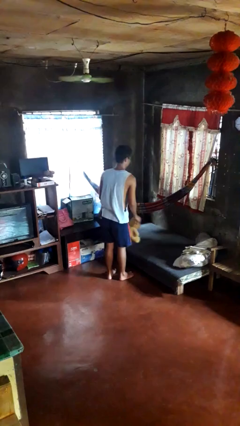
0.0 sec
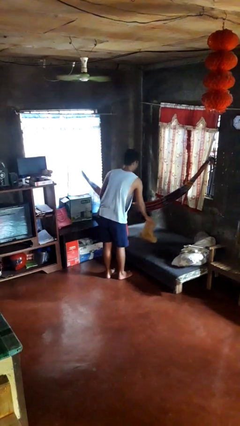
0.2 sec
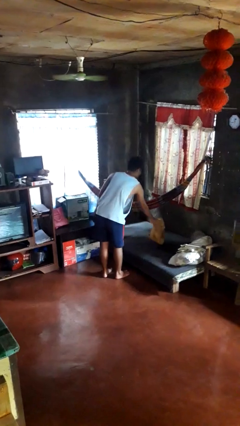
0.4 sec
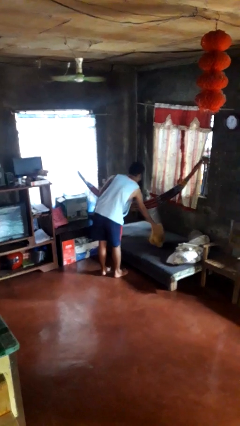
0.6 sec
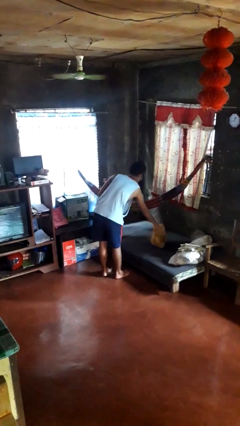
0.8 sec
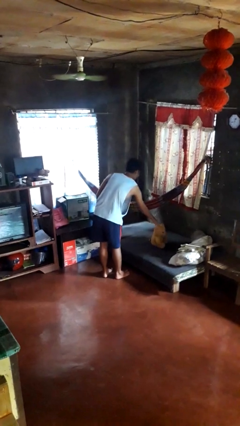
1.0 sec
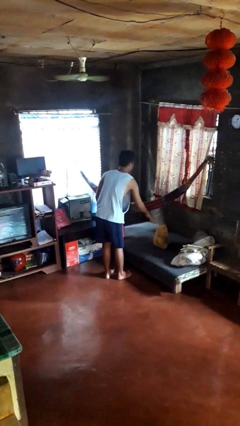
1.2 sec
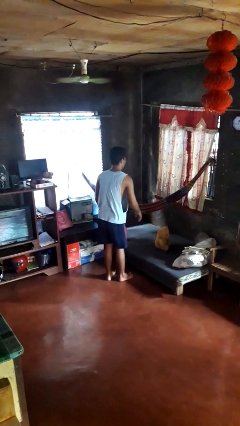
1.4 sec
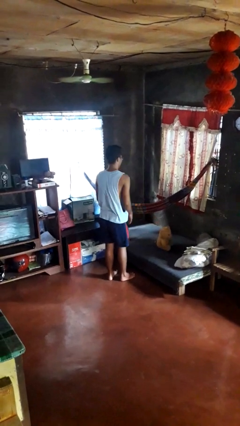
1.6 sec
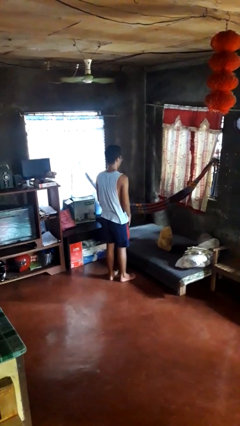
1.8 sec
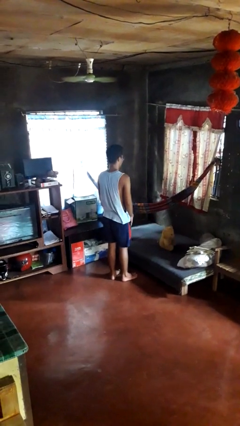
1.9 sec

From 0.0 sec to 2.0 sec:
person puts down object on bed

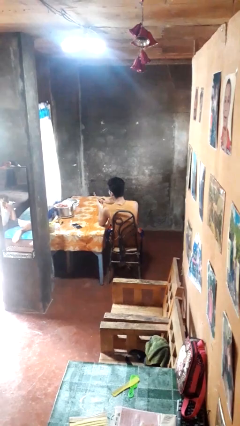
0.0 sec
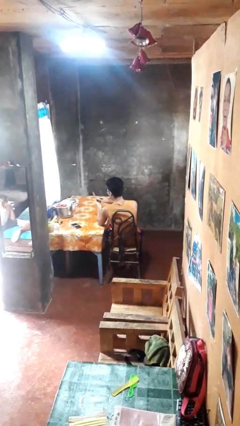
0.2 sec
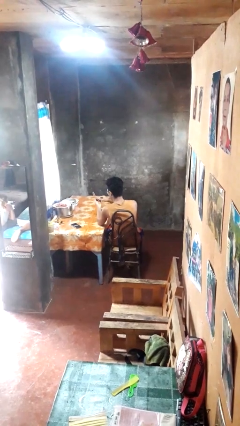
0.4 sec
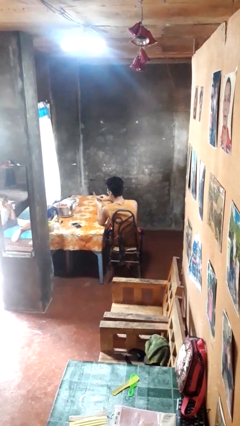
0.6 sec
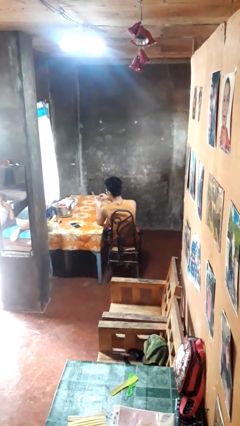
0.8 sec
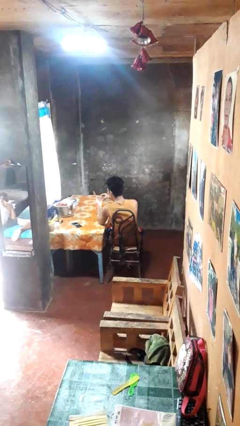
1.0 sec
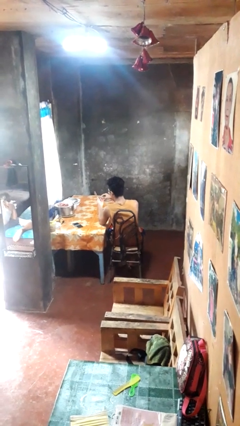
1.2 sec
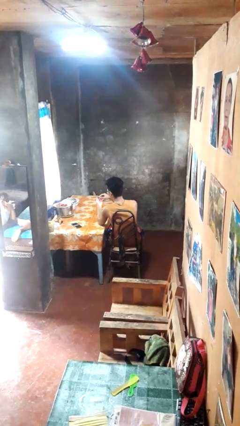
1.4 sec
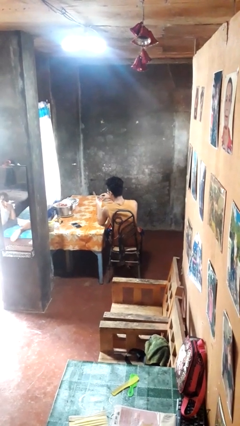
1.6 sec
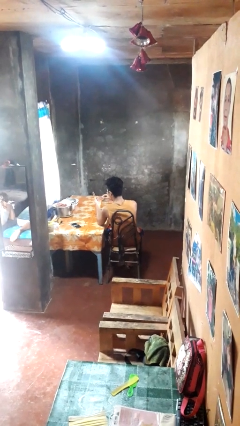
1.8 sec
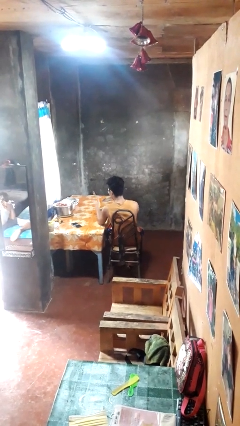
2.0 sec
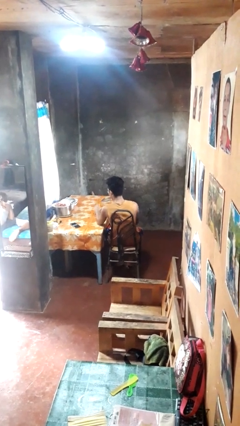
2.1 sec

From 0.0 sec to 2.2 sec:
person files fingernails

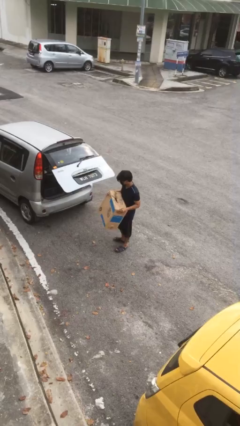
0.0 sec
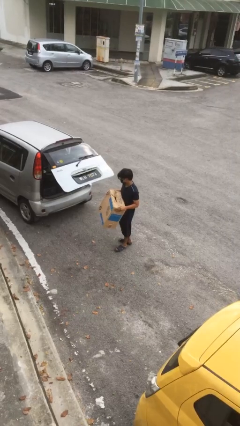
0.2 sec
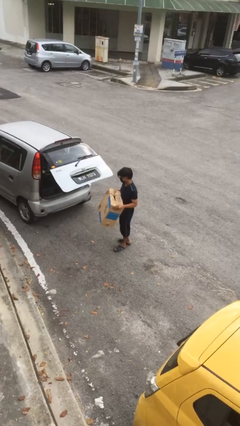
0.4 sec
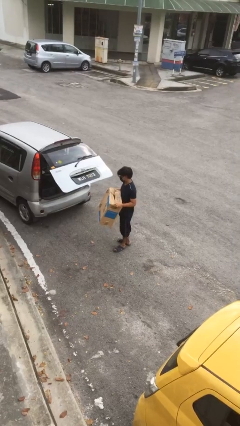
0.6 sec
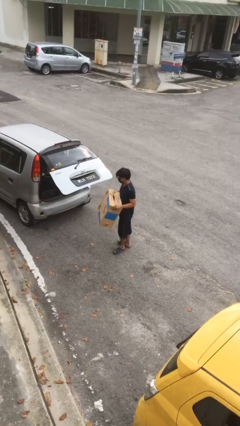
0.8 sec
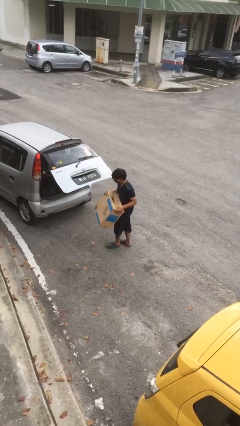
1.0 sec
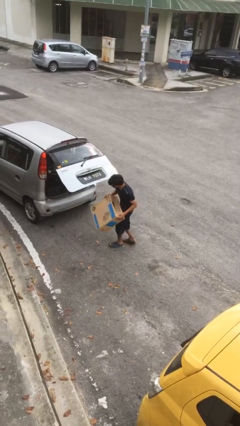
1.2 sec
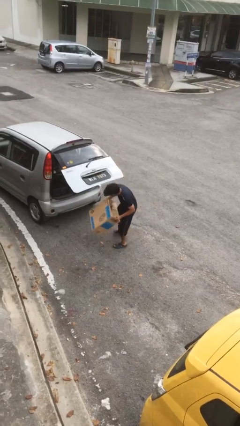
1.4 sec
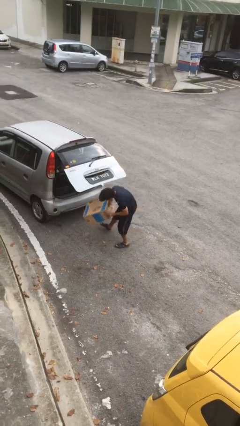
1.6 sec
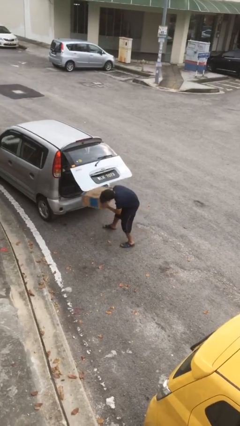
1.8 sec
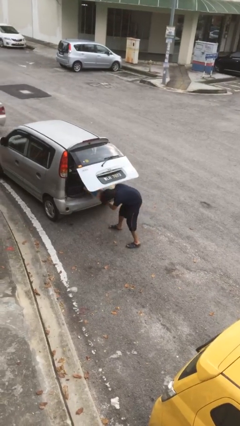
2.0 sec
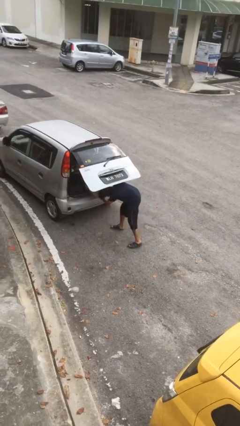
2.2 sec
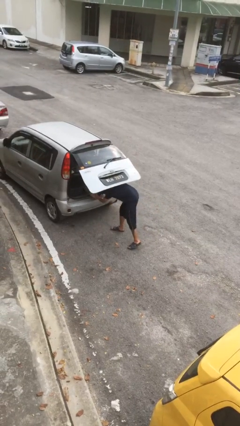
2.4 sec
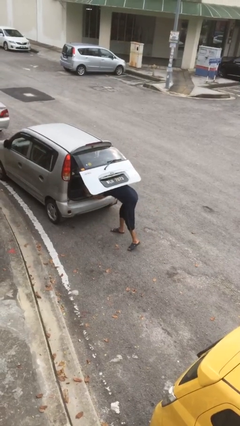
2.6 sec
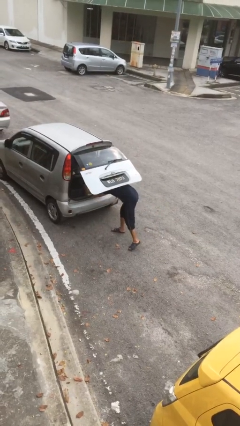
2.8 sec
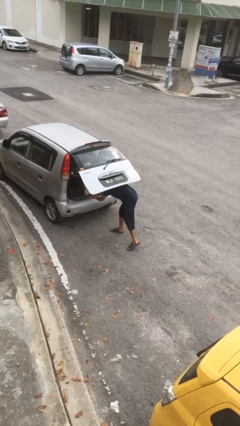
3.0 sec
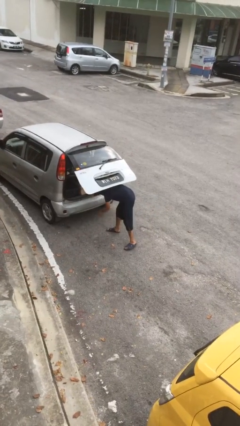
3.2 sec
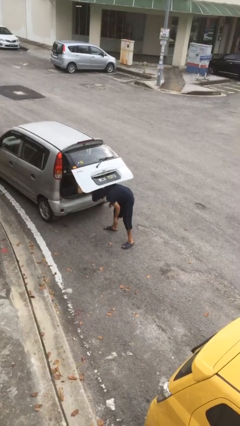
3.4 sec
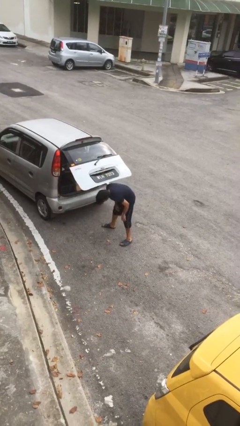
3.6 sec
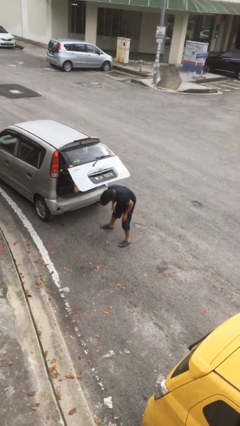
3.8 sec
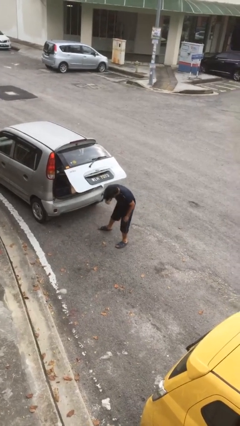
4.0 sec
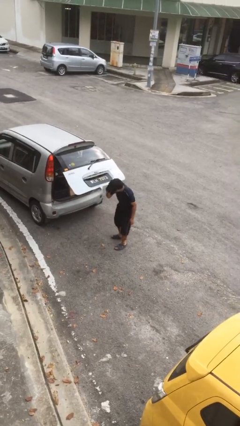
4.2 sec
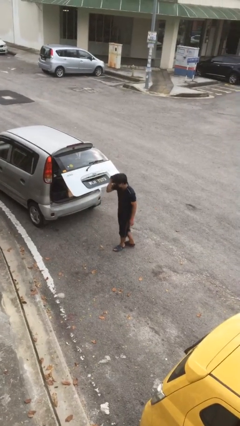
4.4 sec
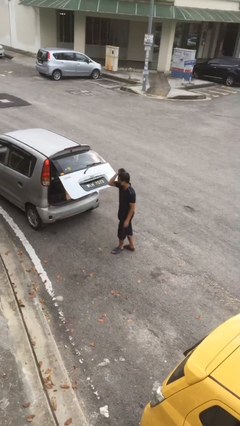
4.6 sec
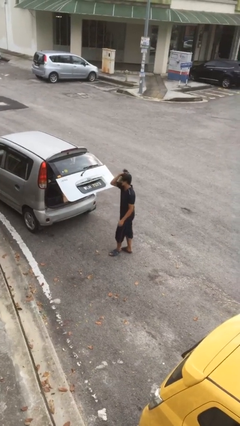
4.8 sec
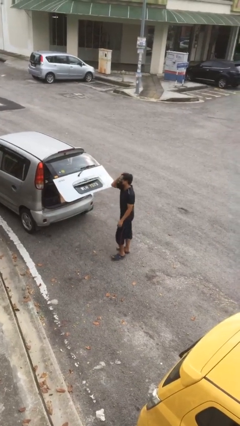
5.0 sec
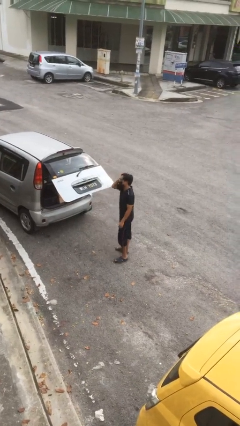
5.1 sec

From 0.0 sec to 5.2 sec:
person loads car

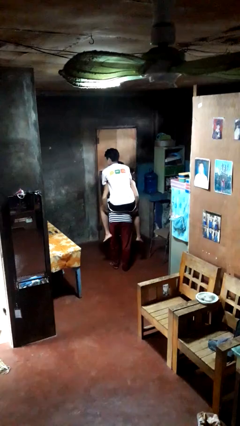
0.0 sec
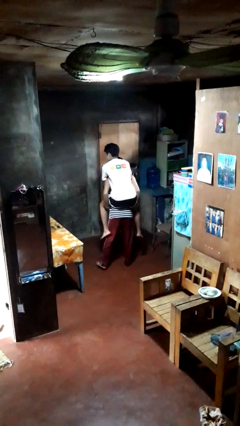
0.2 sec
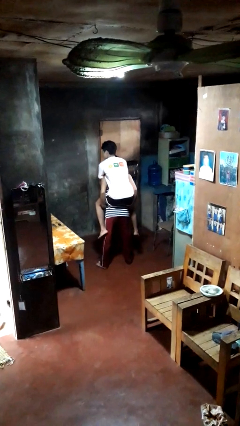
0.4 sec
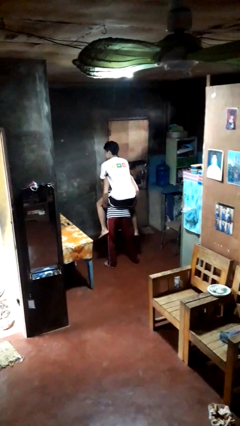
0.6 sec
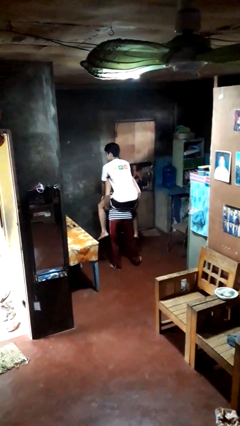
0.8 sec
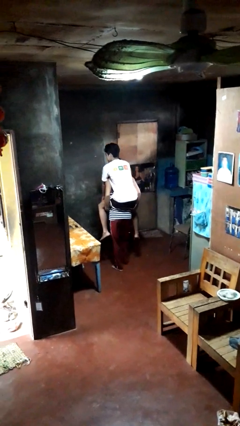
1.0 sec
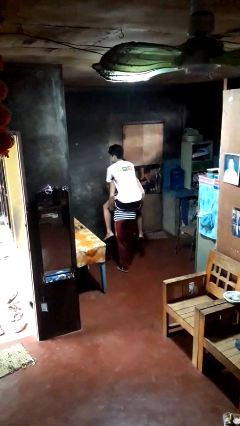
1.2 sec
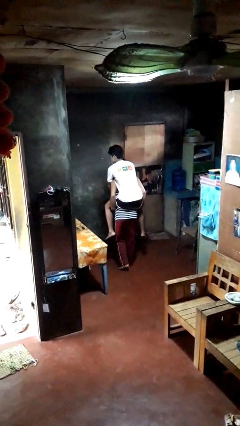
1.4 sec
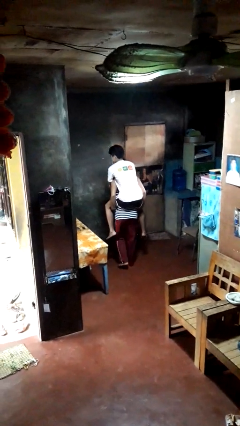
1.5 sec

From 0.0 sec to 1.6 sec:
person carries person on back

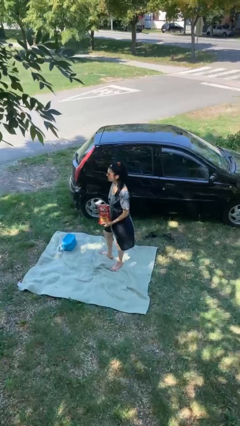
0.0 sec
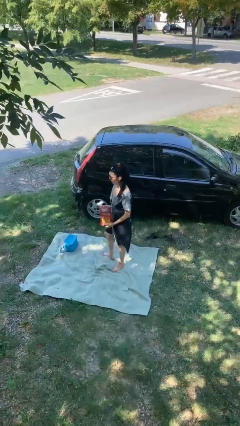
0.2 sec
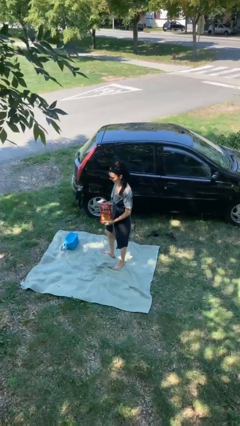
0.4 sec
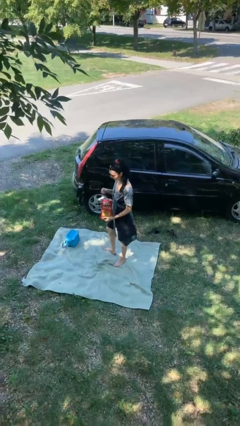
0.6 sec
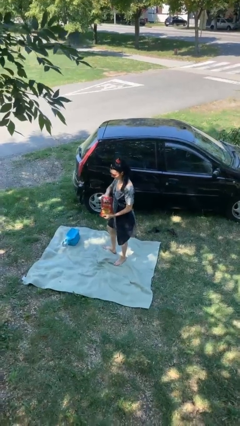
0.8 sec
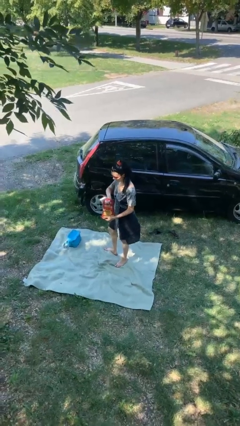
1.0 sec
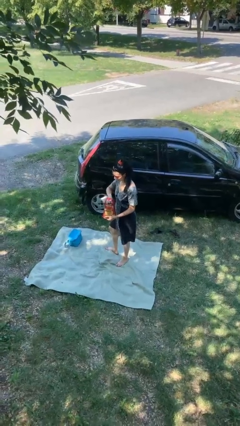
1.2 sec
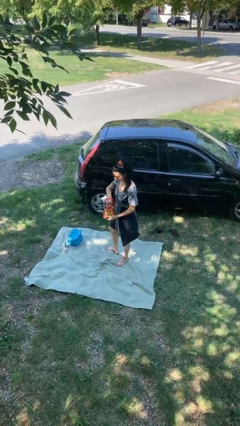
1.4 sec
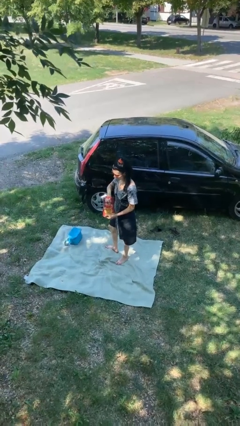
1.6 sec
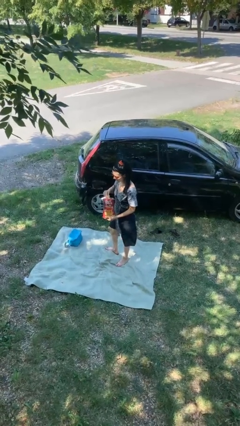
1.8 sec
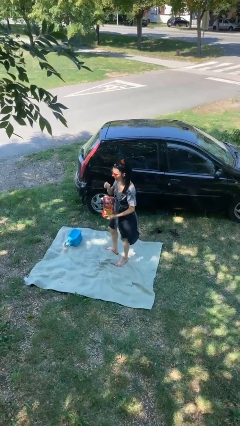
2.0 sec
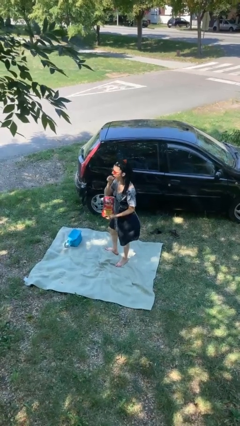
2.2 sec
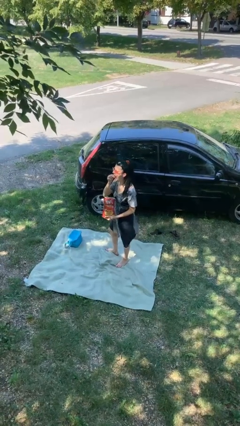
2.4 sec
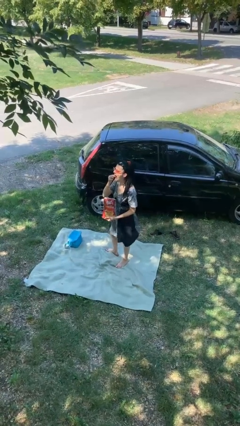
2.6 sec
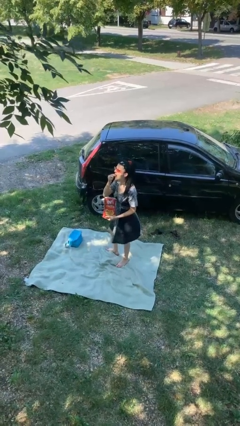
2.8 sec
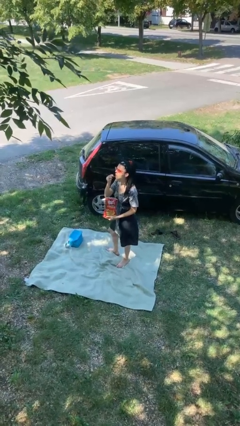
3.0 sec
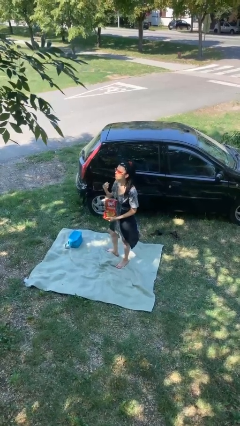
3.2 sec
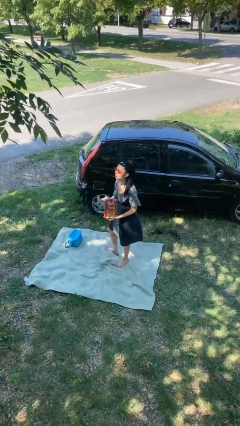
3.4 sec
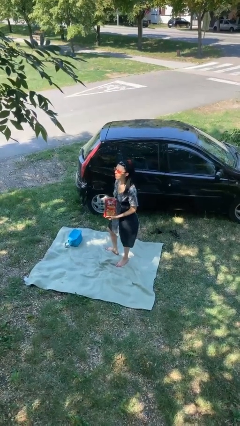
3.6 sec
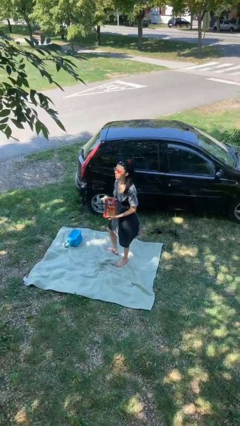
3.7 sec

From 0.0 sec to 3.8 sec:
person eats snack from bag

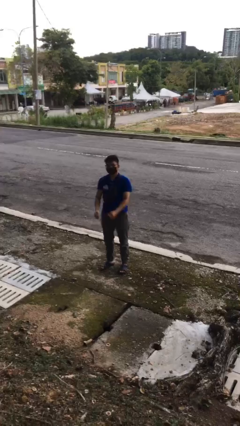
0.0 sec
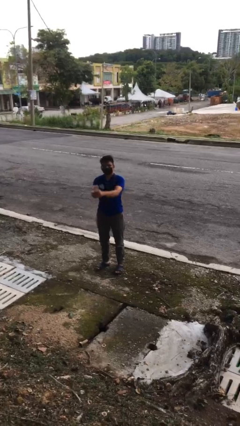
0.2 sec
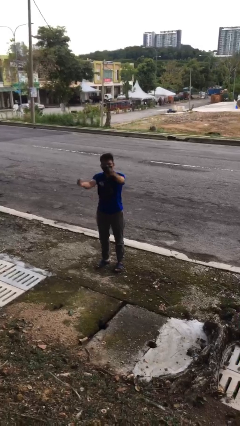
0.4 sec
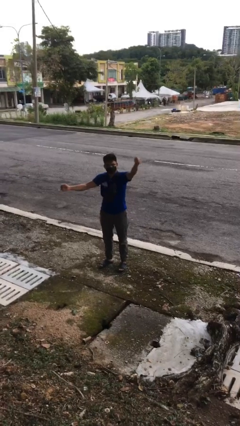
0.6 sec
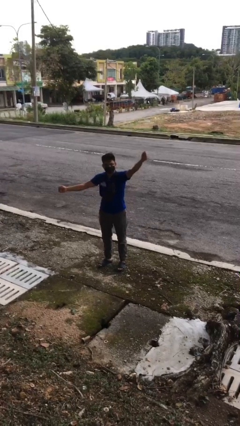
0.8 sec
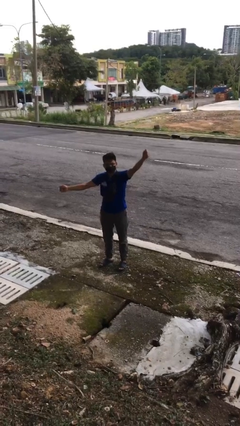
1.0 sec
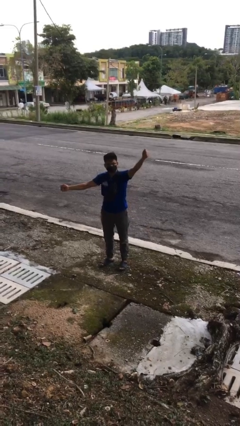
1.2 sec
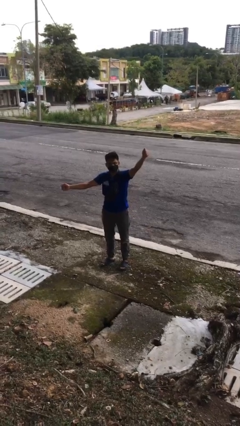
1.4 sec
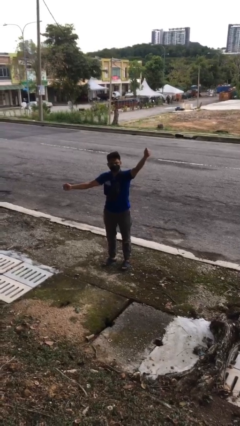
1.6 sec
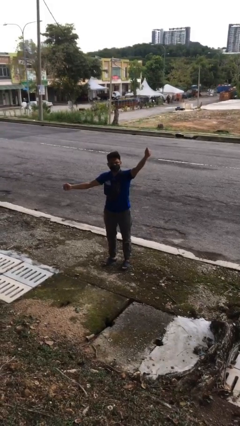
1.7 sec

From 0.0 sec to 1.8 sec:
person gestures zoom in

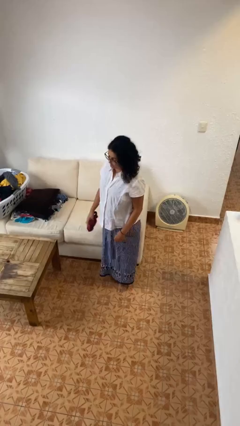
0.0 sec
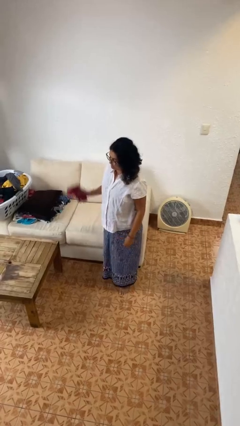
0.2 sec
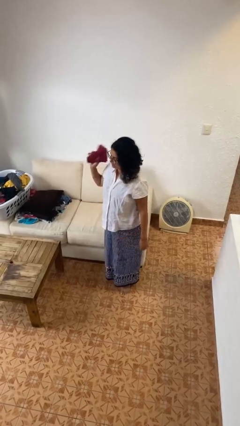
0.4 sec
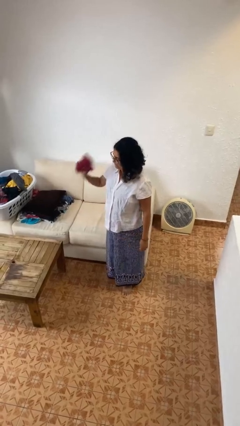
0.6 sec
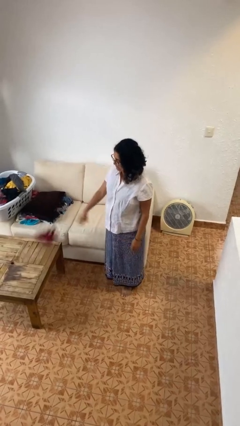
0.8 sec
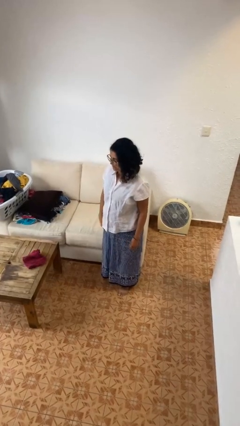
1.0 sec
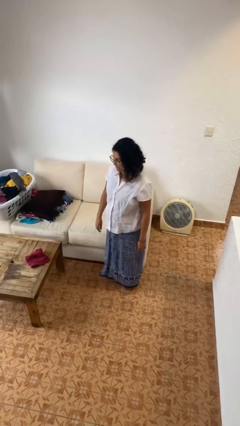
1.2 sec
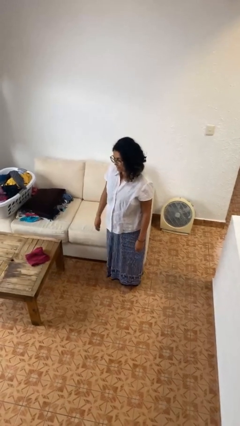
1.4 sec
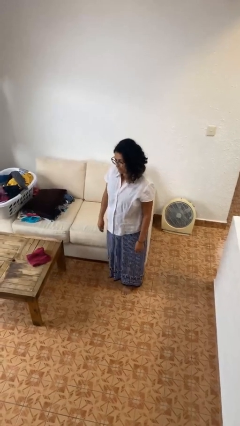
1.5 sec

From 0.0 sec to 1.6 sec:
person throws object on table
